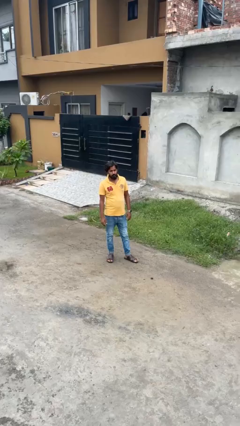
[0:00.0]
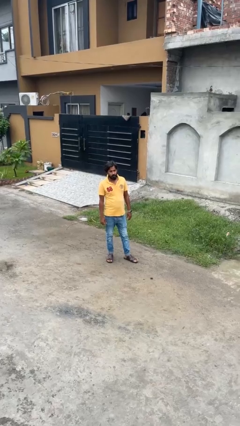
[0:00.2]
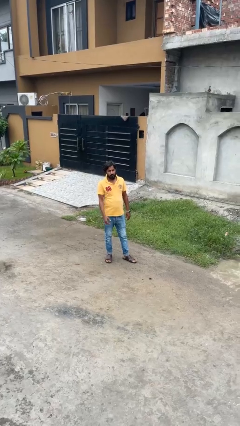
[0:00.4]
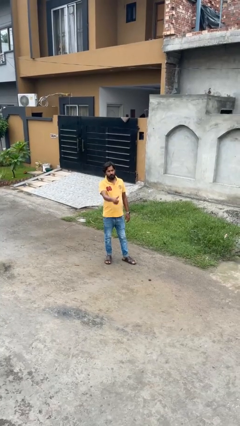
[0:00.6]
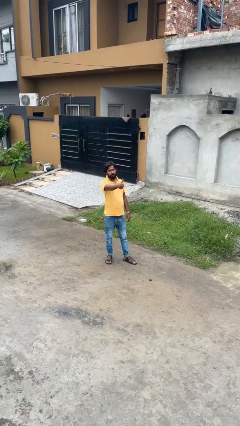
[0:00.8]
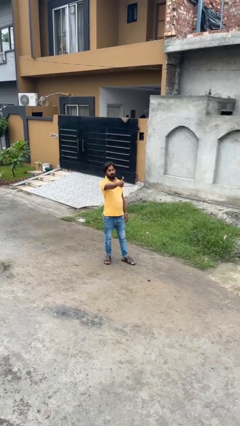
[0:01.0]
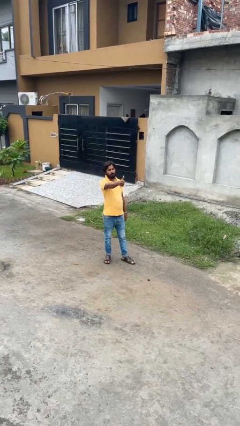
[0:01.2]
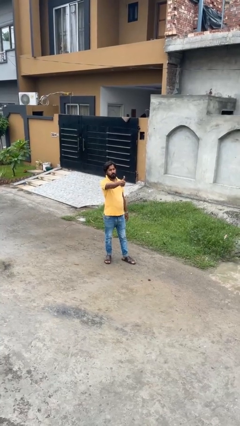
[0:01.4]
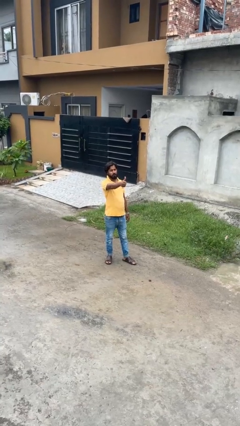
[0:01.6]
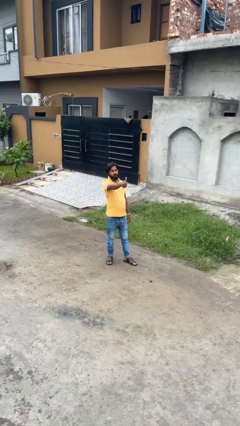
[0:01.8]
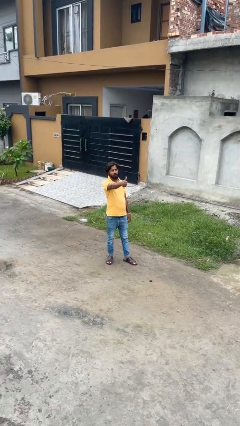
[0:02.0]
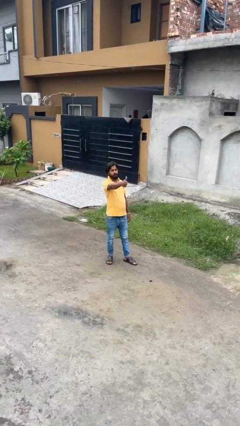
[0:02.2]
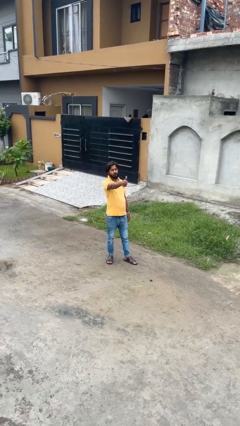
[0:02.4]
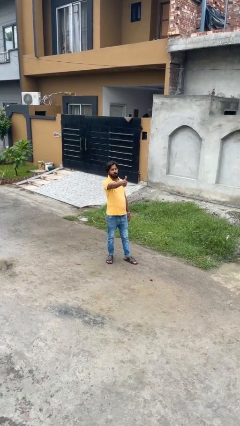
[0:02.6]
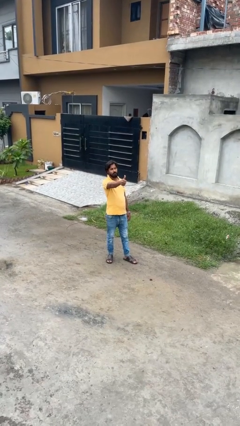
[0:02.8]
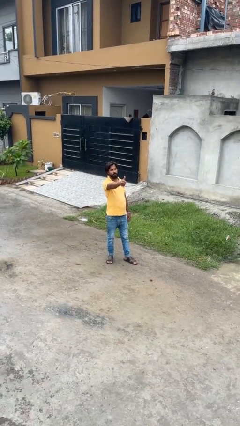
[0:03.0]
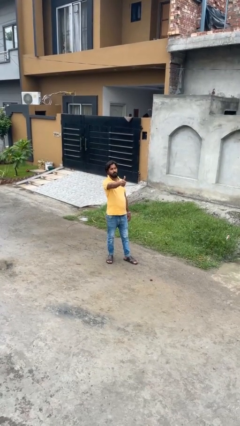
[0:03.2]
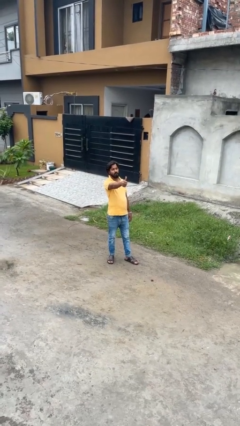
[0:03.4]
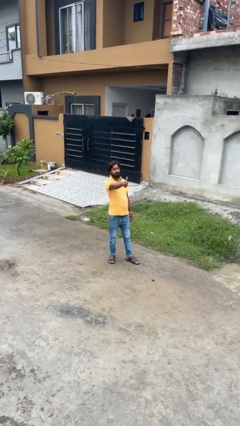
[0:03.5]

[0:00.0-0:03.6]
person gestures thumbs up

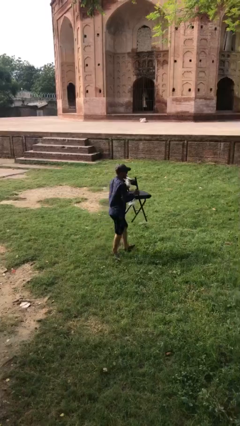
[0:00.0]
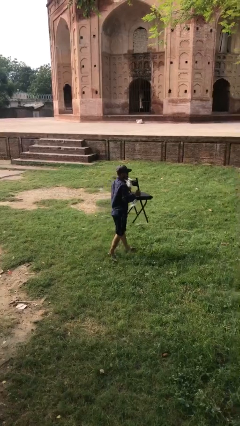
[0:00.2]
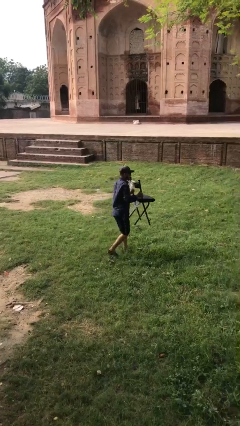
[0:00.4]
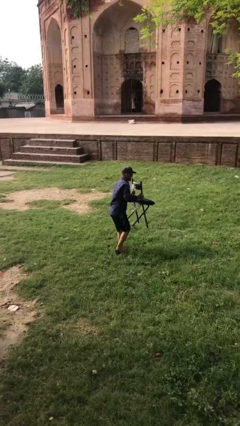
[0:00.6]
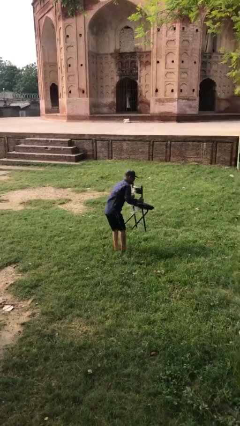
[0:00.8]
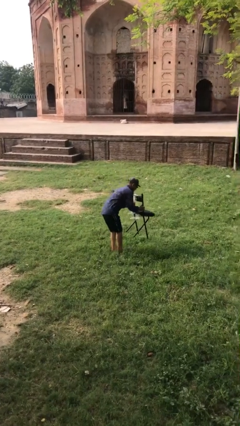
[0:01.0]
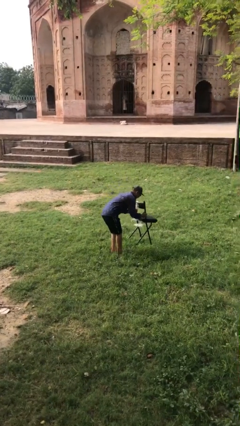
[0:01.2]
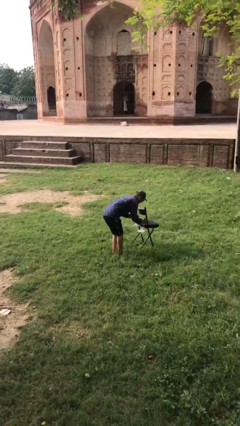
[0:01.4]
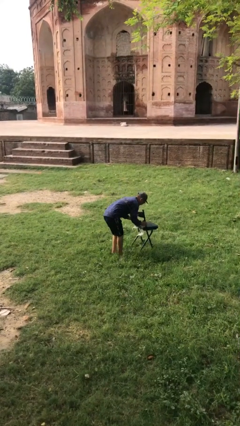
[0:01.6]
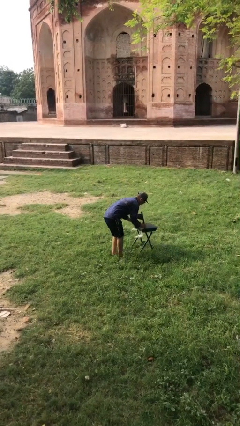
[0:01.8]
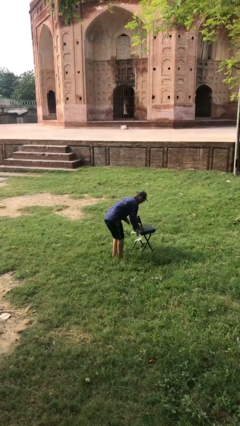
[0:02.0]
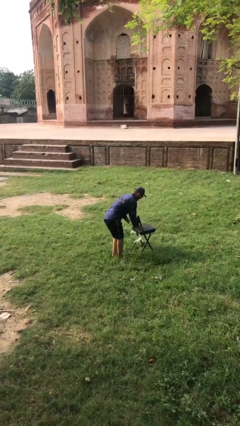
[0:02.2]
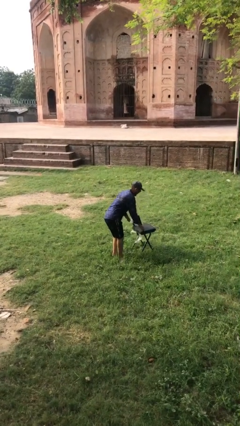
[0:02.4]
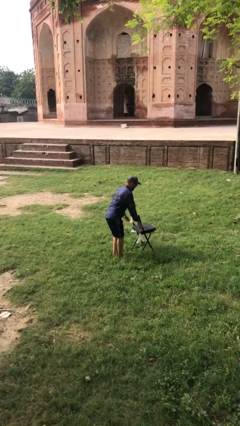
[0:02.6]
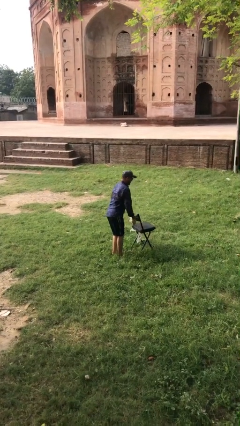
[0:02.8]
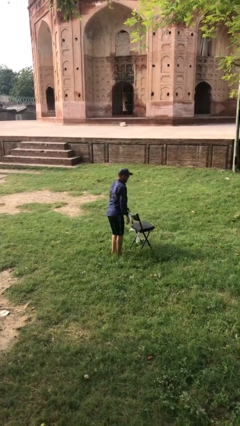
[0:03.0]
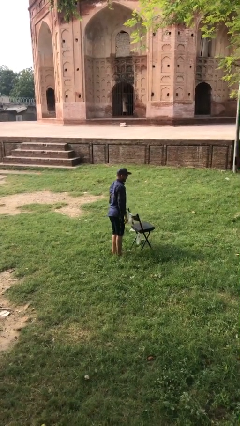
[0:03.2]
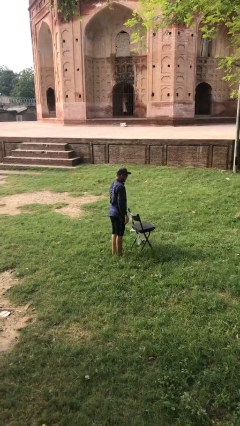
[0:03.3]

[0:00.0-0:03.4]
person puts down object on floor

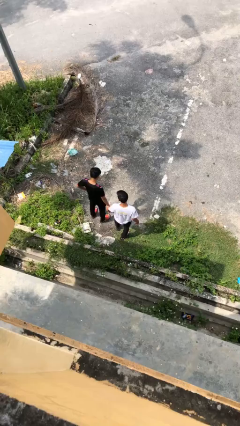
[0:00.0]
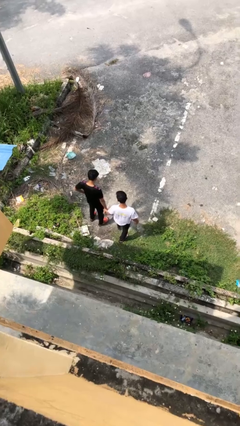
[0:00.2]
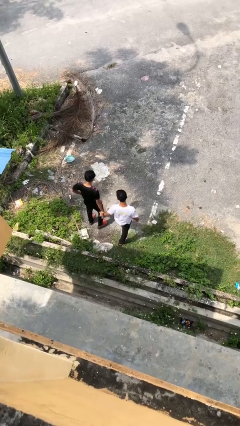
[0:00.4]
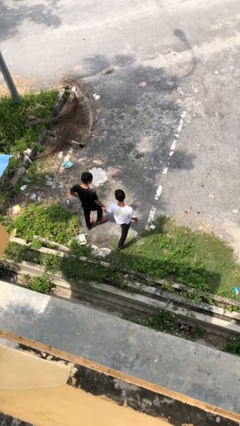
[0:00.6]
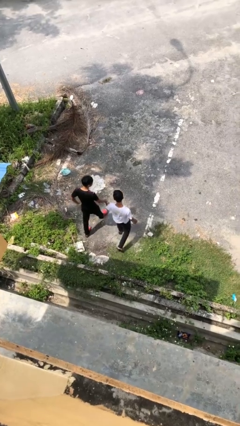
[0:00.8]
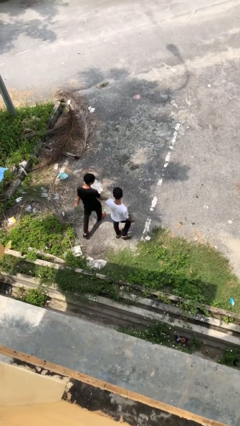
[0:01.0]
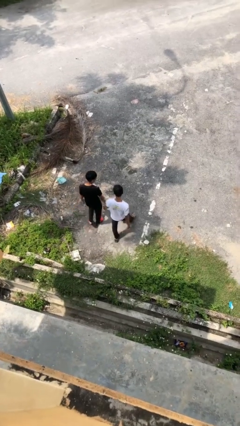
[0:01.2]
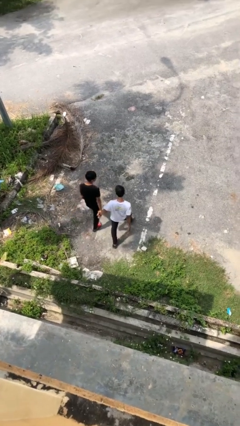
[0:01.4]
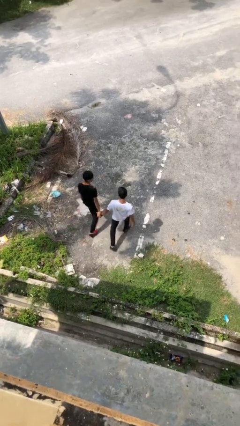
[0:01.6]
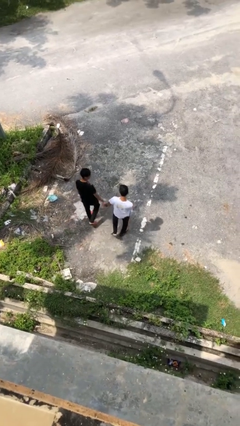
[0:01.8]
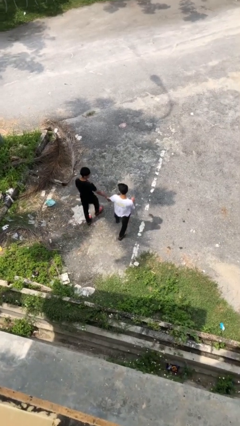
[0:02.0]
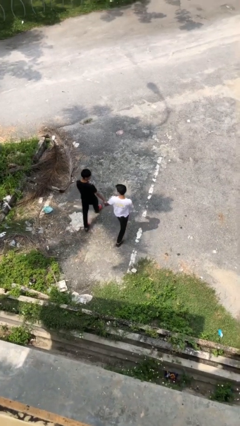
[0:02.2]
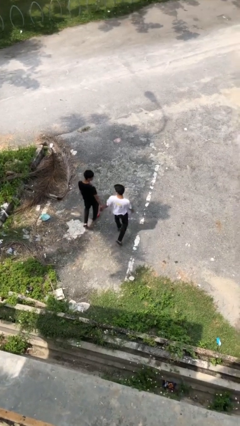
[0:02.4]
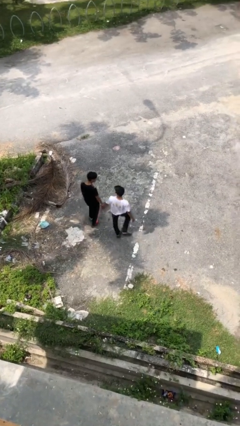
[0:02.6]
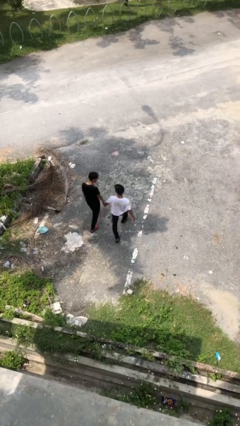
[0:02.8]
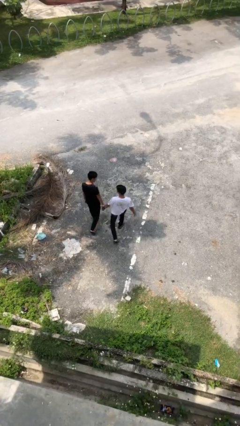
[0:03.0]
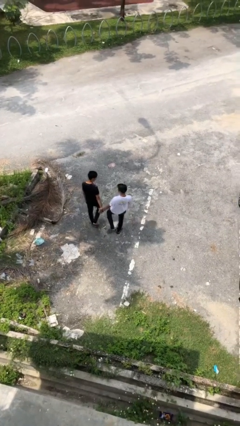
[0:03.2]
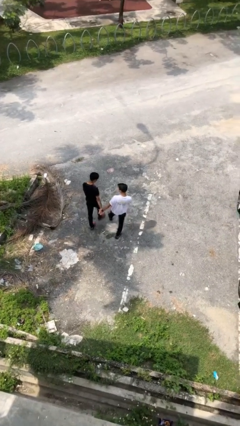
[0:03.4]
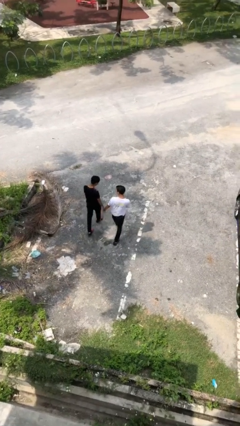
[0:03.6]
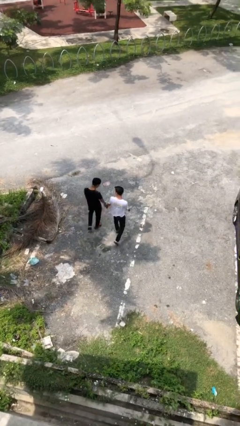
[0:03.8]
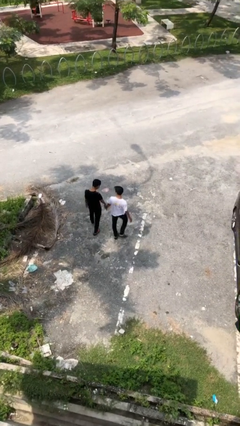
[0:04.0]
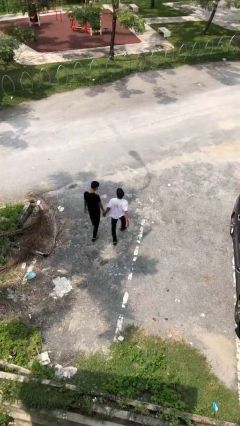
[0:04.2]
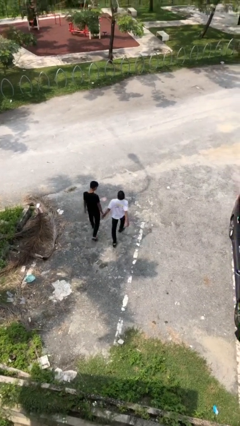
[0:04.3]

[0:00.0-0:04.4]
person holds hand

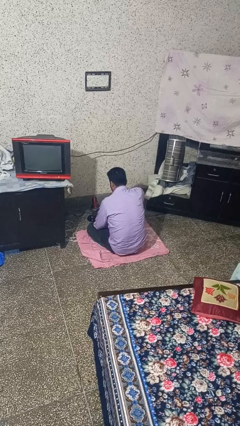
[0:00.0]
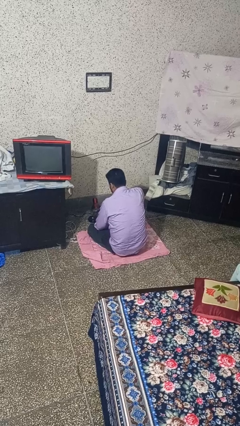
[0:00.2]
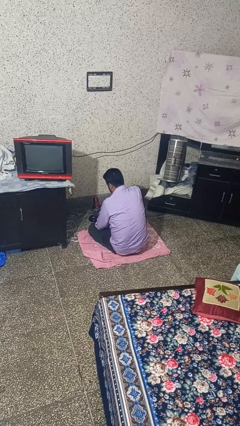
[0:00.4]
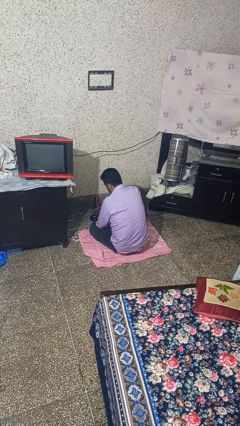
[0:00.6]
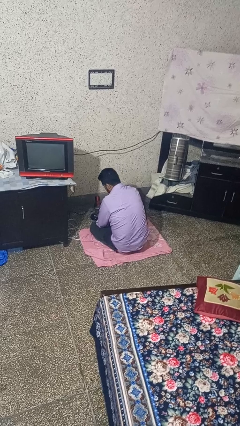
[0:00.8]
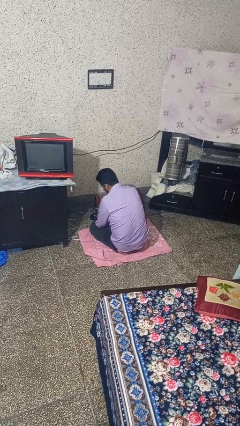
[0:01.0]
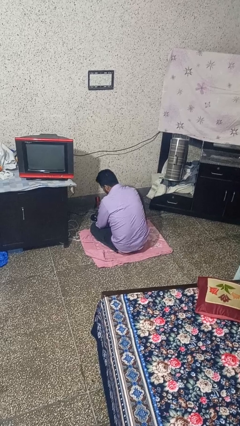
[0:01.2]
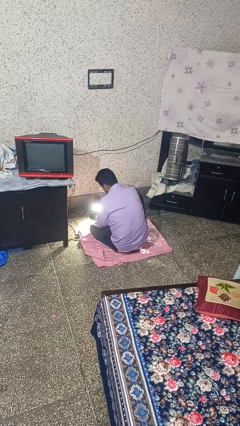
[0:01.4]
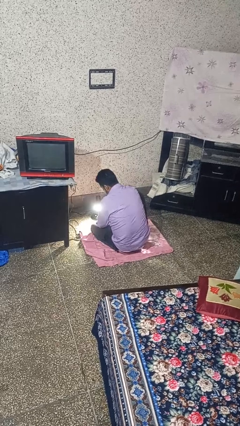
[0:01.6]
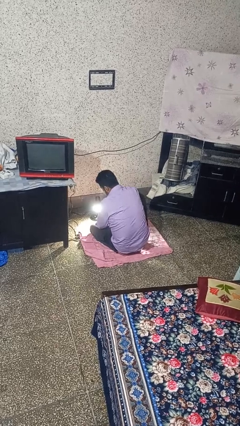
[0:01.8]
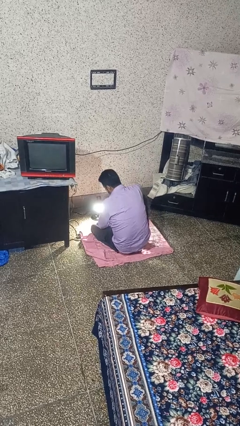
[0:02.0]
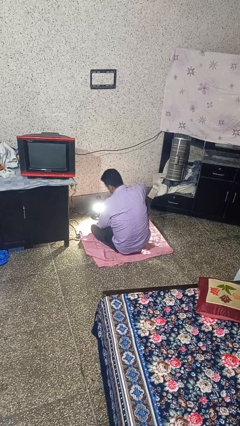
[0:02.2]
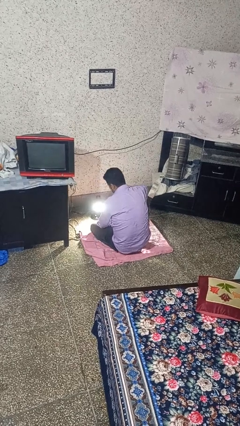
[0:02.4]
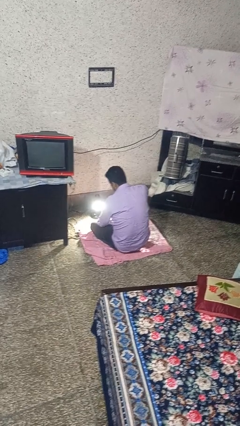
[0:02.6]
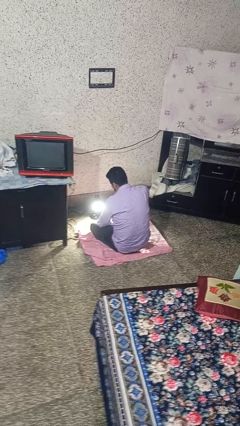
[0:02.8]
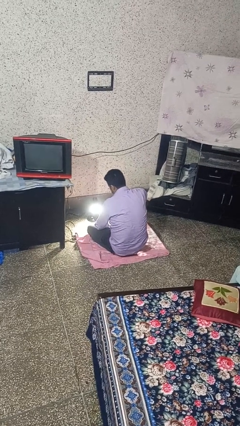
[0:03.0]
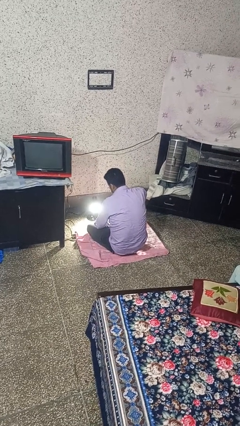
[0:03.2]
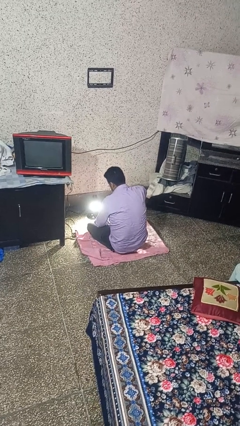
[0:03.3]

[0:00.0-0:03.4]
person turns on fan

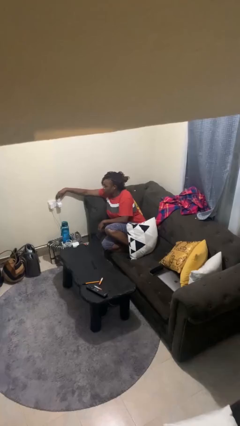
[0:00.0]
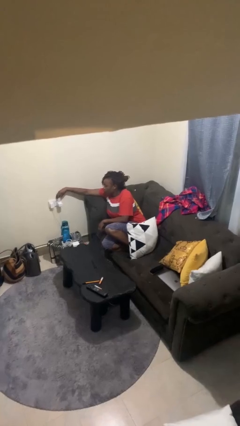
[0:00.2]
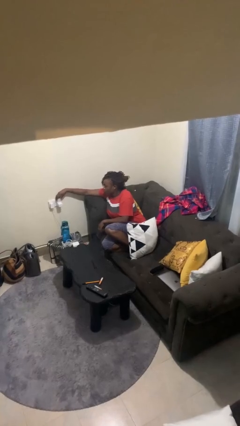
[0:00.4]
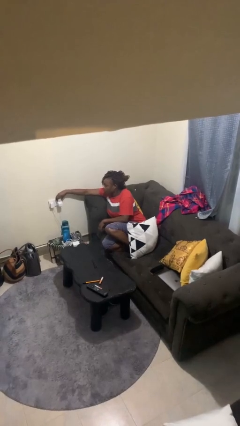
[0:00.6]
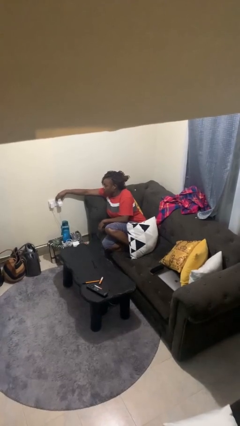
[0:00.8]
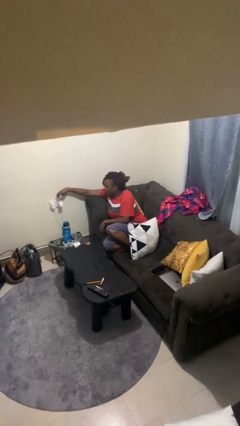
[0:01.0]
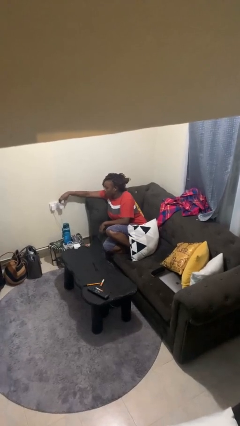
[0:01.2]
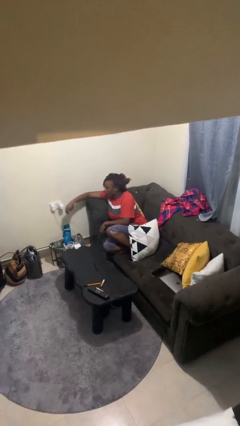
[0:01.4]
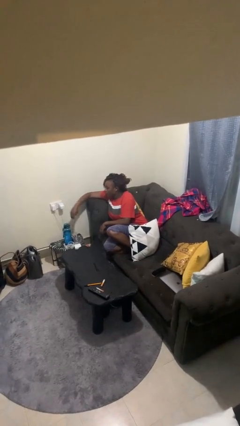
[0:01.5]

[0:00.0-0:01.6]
person unplugs from electrical socket

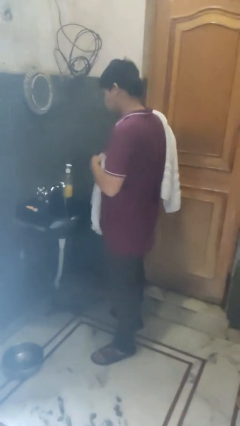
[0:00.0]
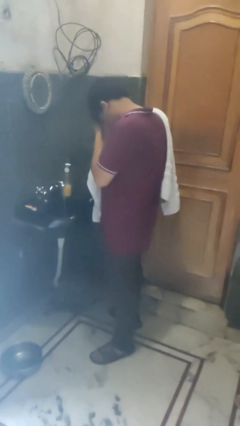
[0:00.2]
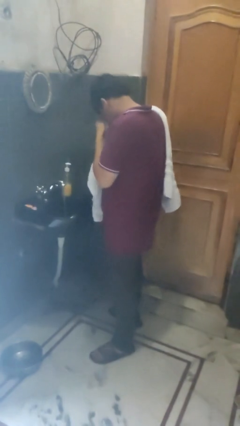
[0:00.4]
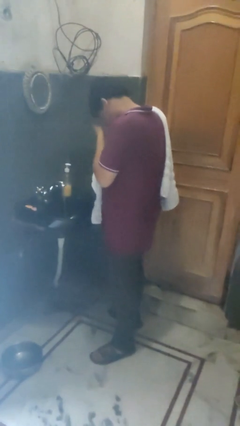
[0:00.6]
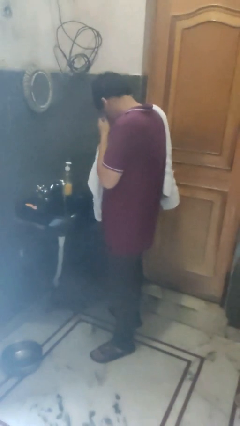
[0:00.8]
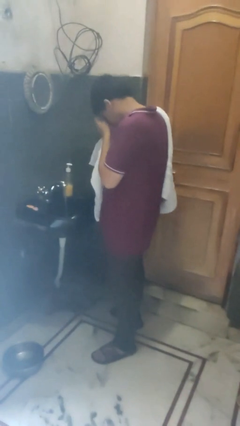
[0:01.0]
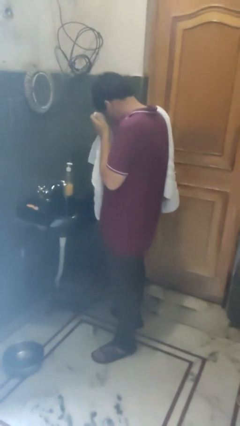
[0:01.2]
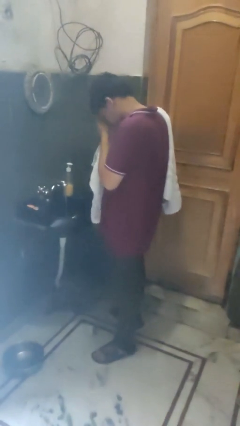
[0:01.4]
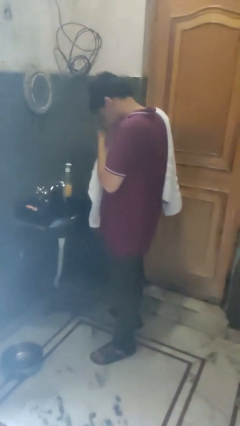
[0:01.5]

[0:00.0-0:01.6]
person dries face with towel
